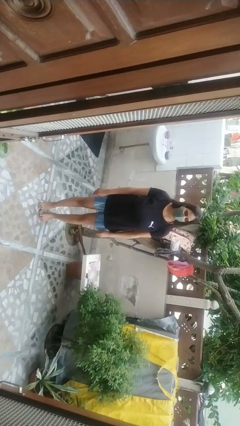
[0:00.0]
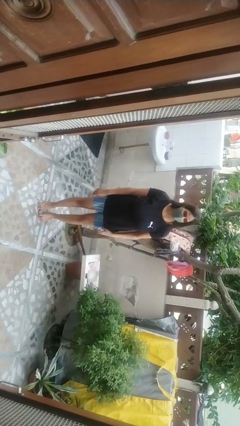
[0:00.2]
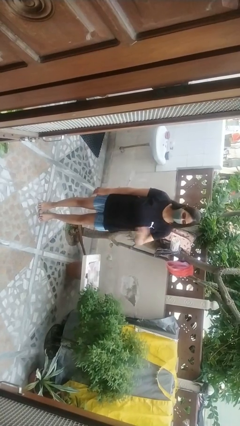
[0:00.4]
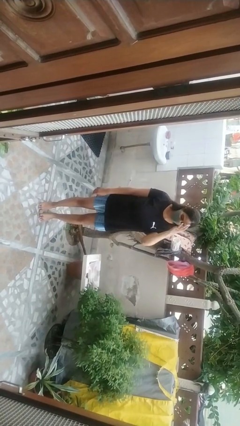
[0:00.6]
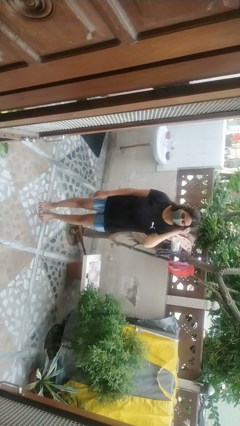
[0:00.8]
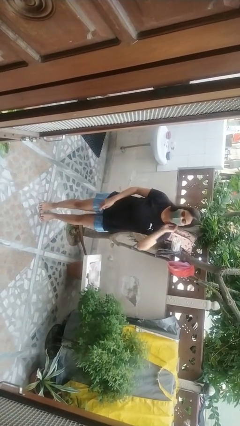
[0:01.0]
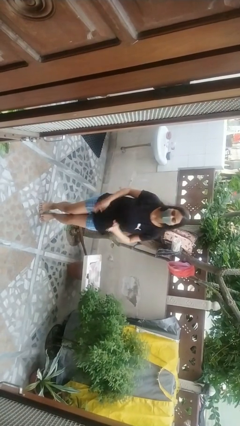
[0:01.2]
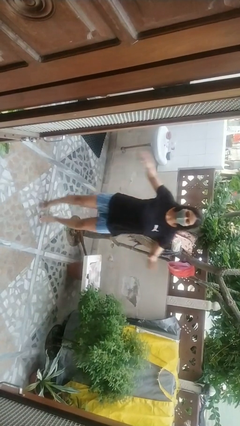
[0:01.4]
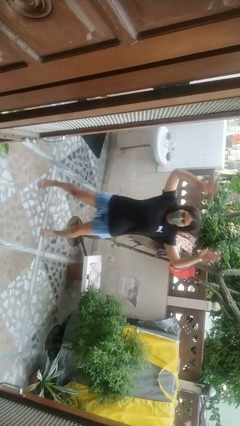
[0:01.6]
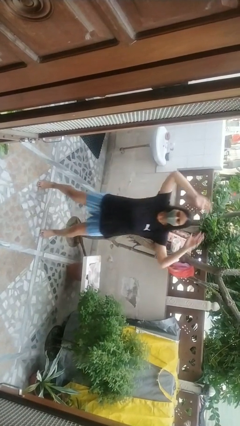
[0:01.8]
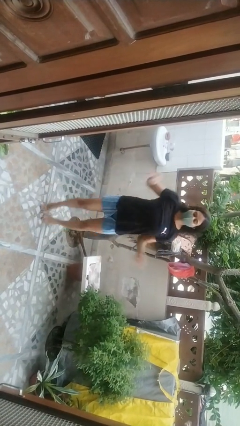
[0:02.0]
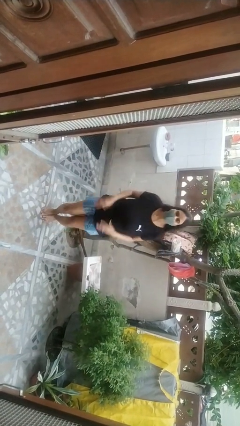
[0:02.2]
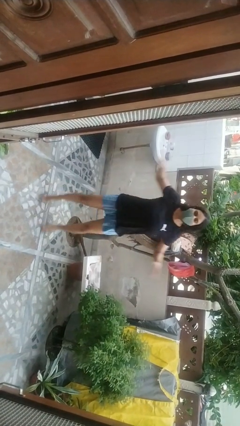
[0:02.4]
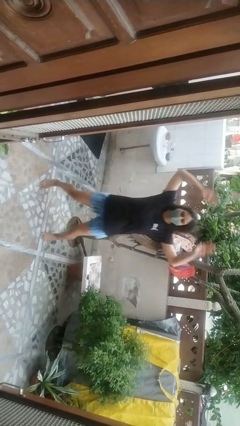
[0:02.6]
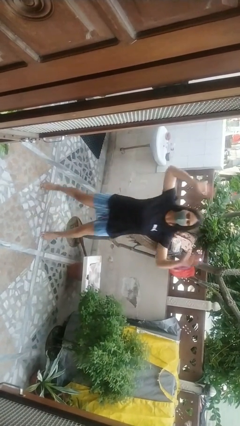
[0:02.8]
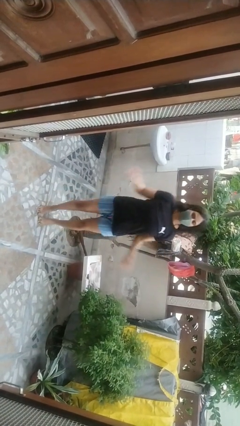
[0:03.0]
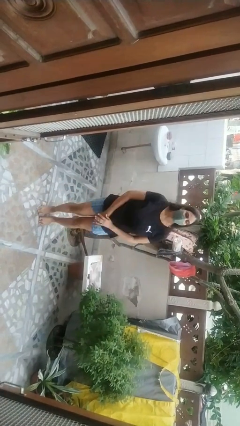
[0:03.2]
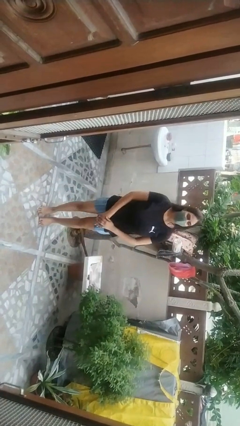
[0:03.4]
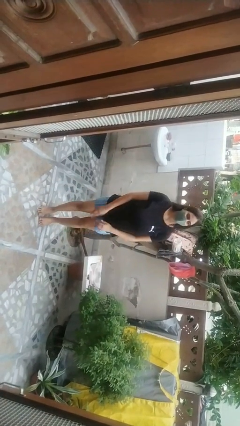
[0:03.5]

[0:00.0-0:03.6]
person exercises with jumping jacks

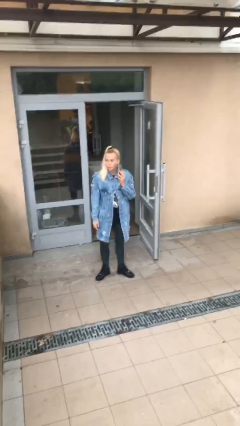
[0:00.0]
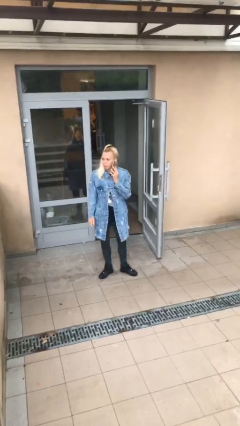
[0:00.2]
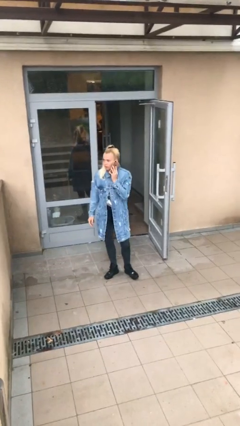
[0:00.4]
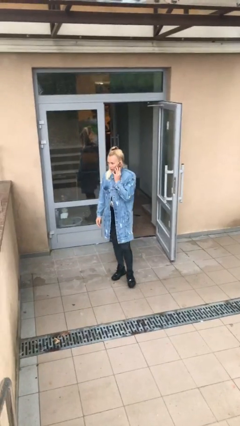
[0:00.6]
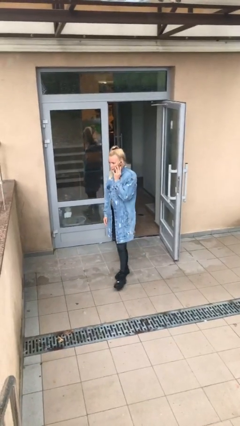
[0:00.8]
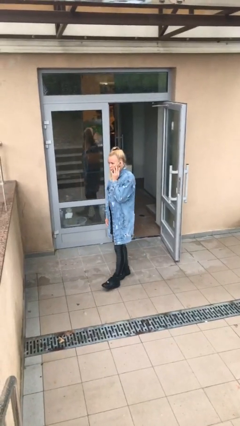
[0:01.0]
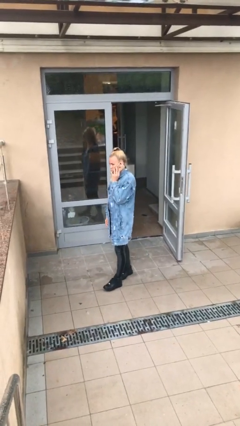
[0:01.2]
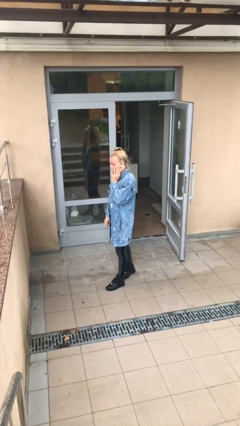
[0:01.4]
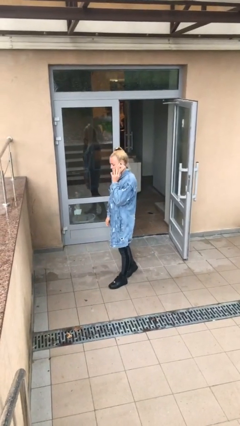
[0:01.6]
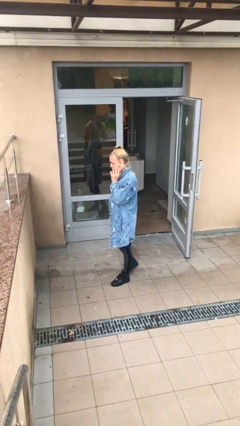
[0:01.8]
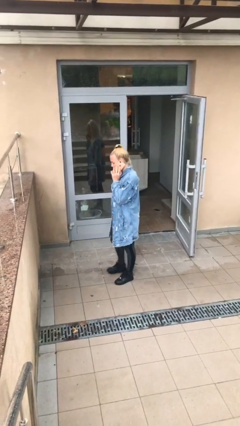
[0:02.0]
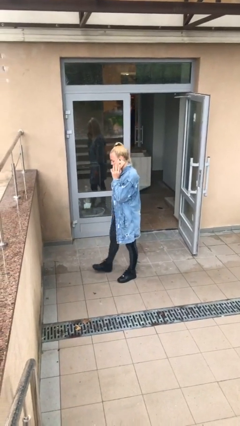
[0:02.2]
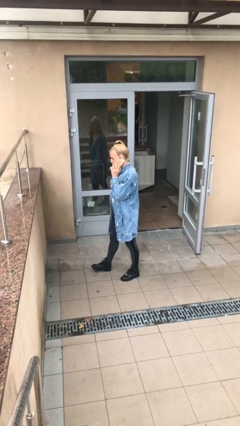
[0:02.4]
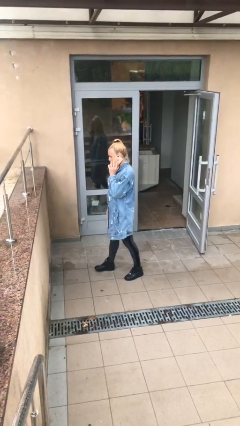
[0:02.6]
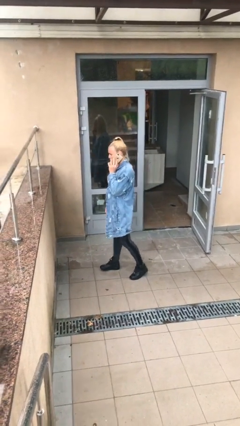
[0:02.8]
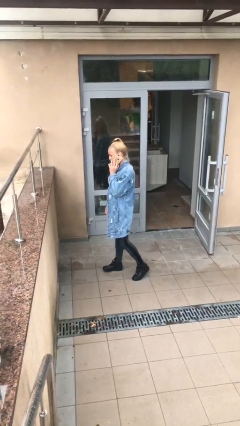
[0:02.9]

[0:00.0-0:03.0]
person talks on phone

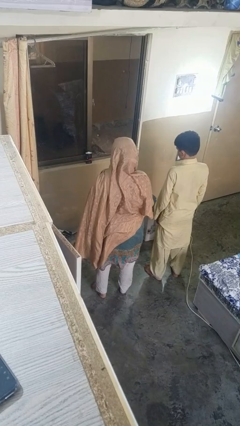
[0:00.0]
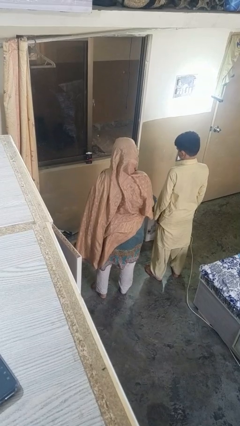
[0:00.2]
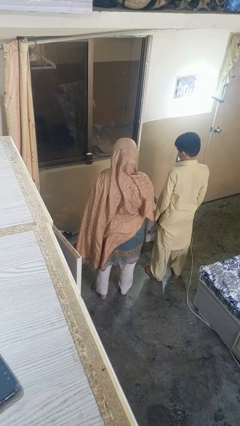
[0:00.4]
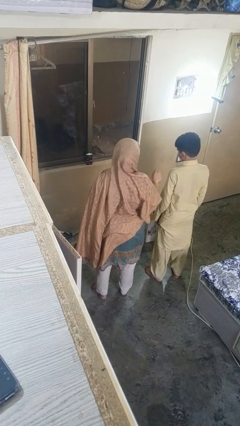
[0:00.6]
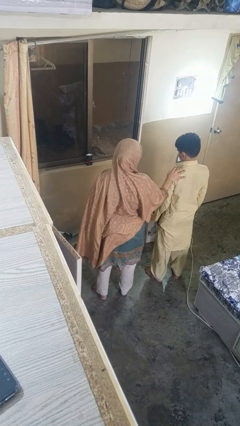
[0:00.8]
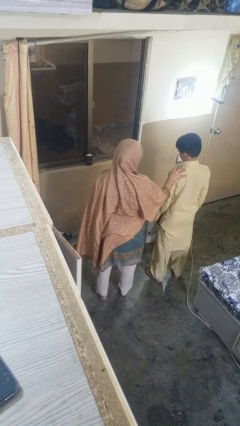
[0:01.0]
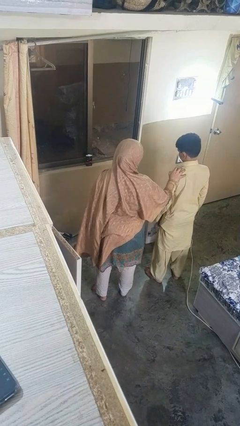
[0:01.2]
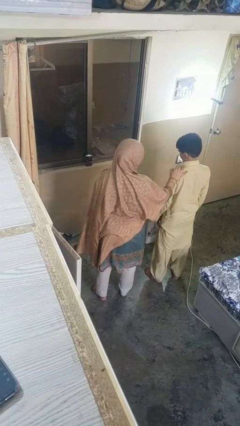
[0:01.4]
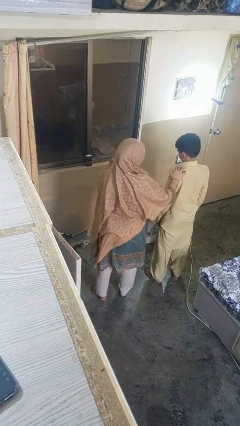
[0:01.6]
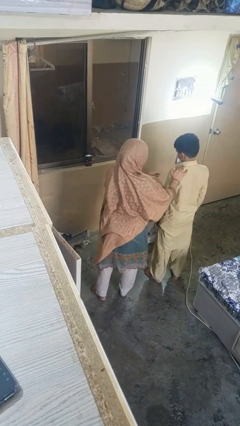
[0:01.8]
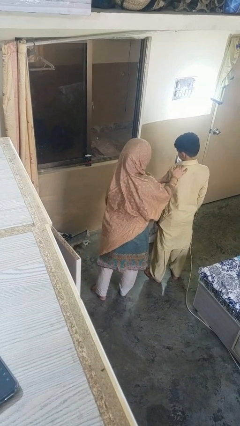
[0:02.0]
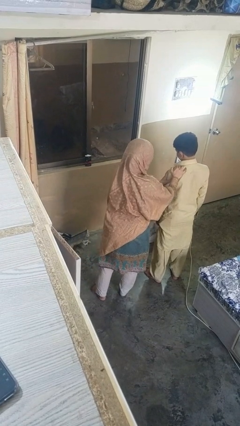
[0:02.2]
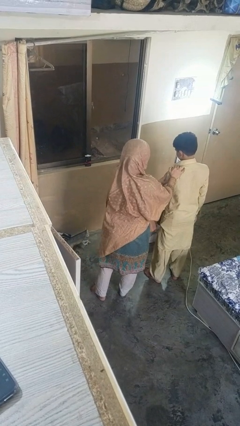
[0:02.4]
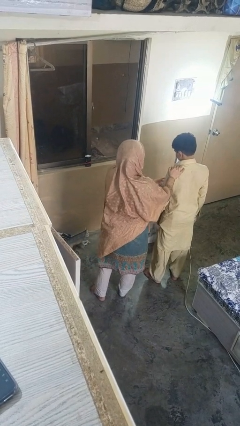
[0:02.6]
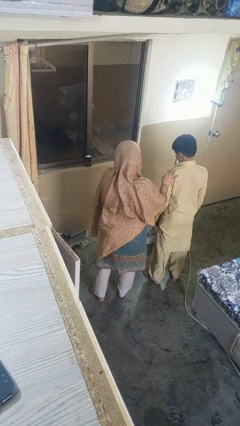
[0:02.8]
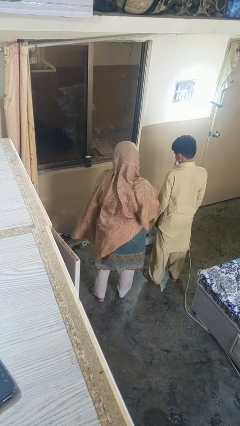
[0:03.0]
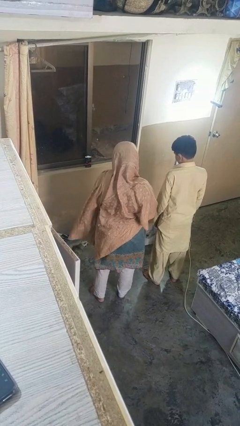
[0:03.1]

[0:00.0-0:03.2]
person shoves person

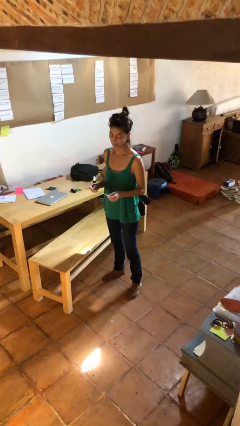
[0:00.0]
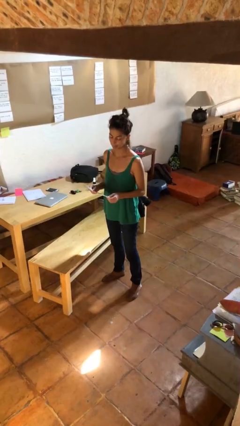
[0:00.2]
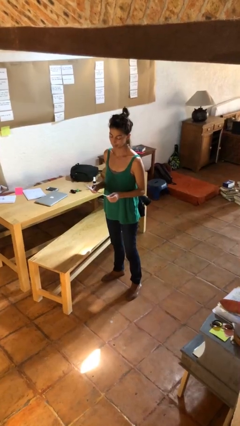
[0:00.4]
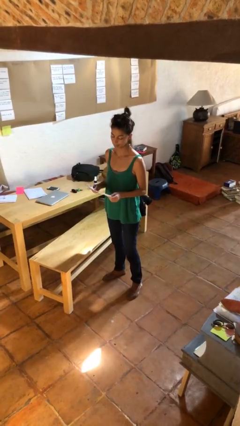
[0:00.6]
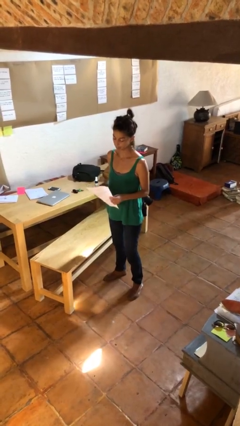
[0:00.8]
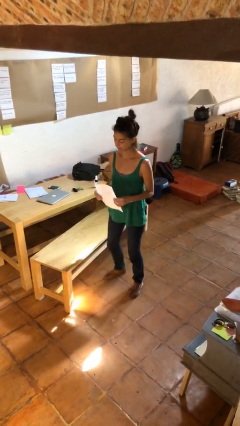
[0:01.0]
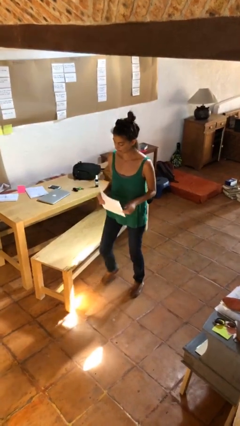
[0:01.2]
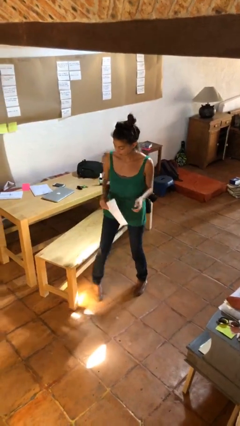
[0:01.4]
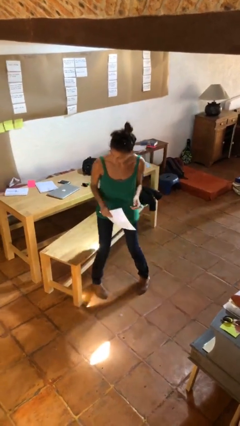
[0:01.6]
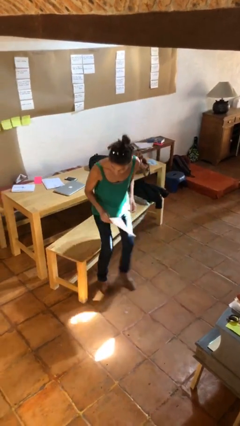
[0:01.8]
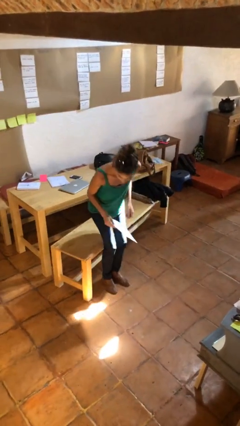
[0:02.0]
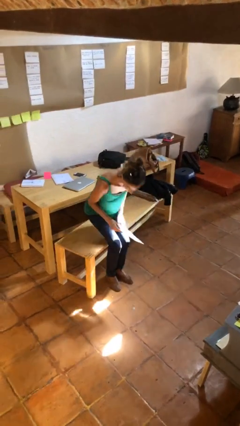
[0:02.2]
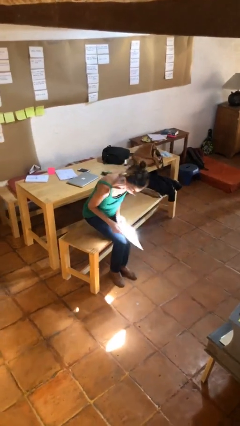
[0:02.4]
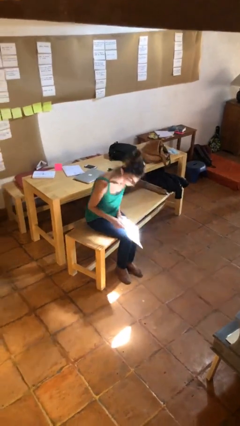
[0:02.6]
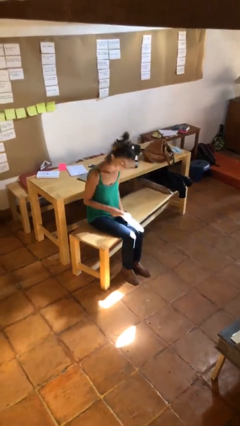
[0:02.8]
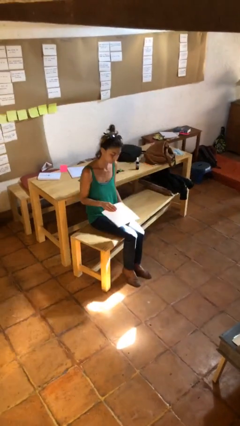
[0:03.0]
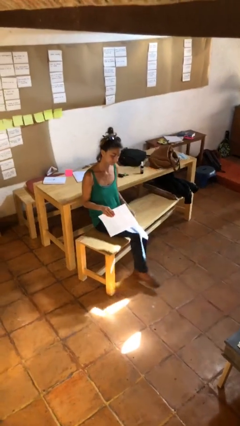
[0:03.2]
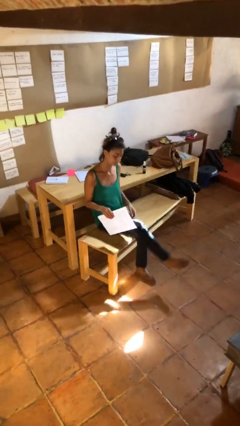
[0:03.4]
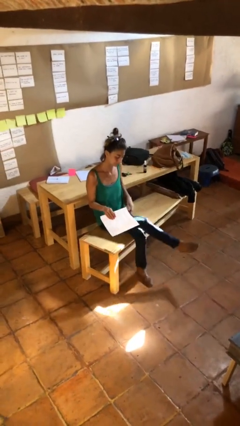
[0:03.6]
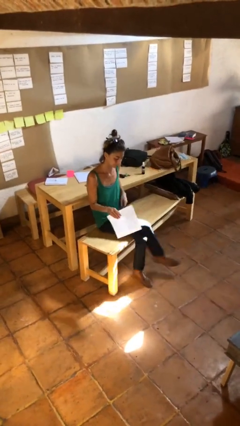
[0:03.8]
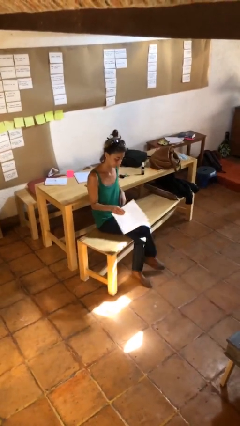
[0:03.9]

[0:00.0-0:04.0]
person sits down

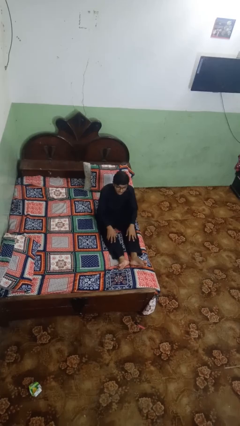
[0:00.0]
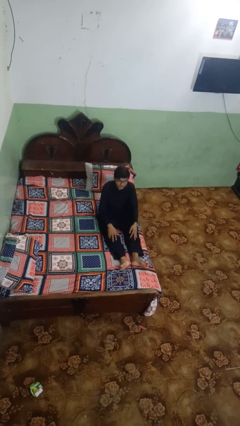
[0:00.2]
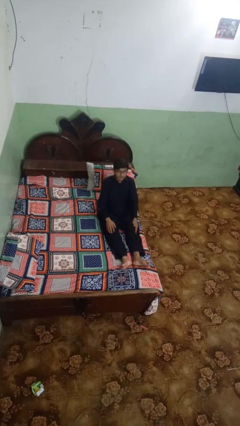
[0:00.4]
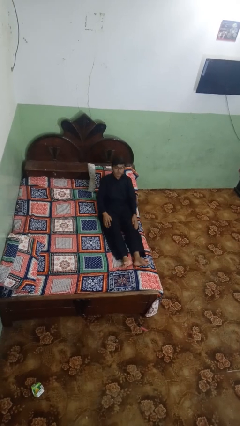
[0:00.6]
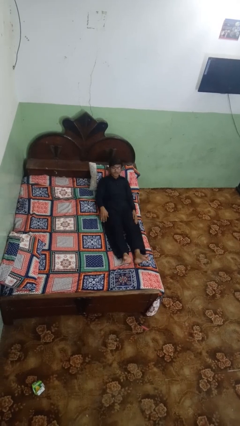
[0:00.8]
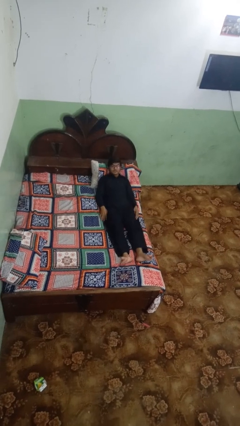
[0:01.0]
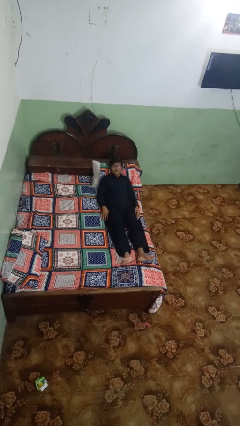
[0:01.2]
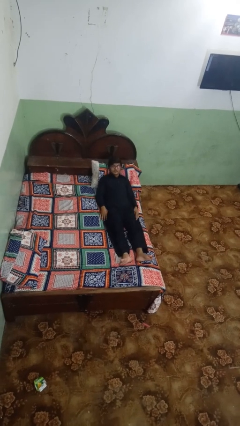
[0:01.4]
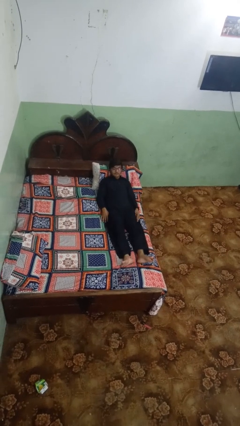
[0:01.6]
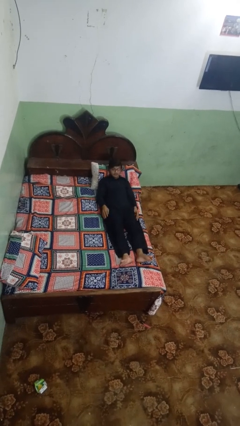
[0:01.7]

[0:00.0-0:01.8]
person lies down on bed

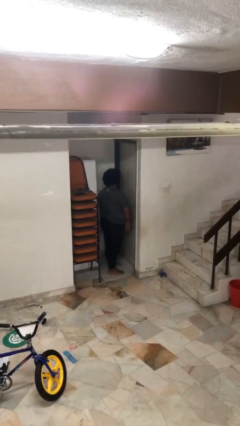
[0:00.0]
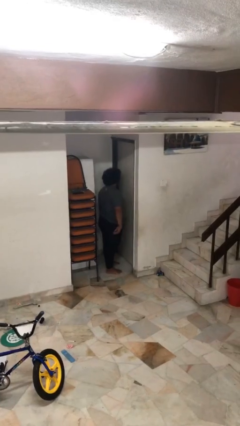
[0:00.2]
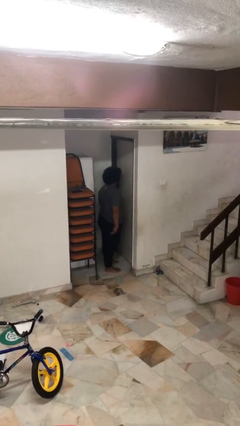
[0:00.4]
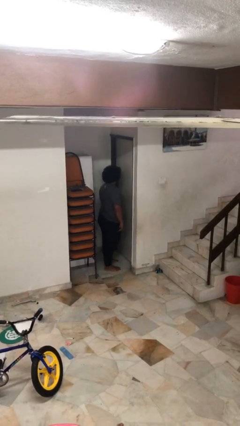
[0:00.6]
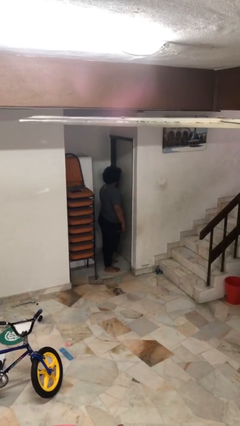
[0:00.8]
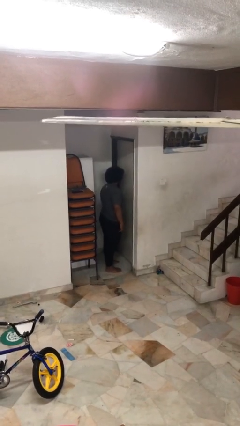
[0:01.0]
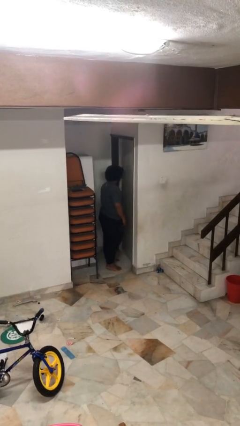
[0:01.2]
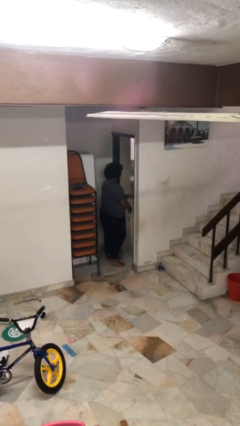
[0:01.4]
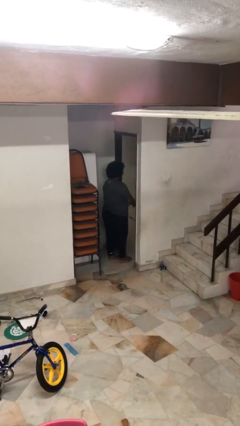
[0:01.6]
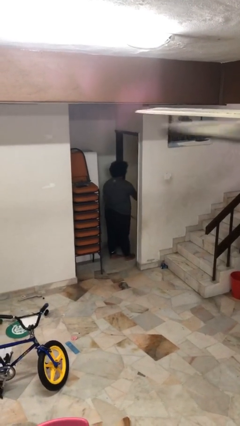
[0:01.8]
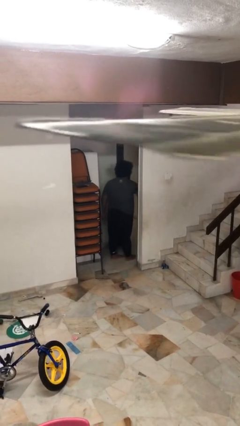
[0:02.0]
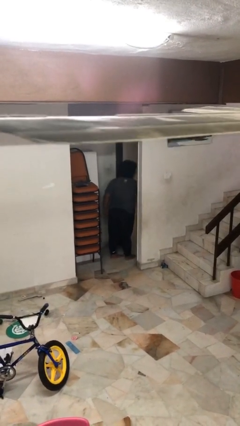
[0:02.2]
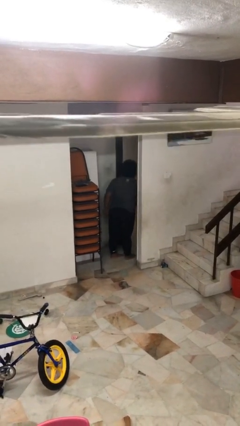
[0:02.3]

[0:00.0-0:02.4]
person opens facility door
